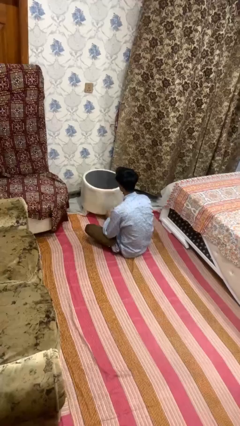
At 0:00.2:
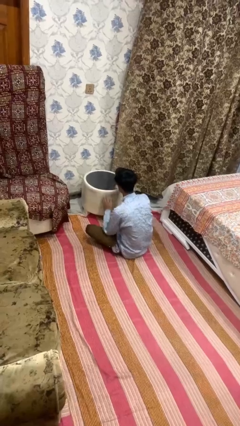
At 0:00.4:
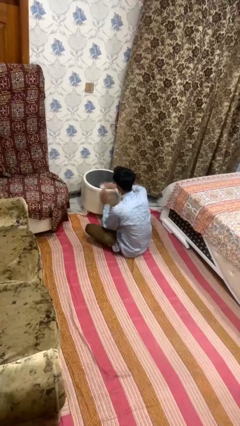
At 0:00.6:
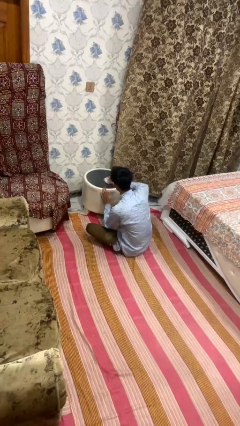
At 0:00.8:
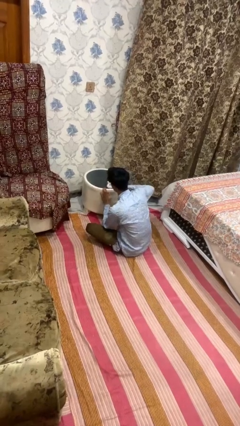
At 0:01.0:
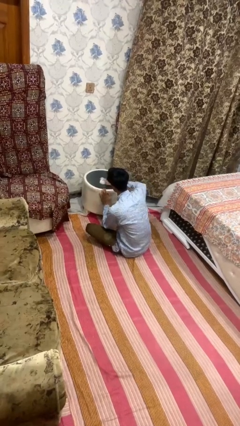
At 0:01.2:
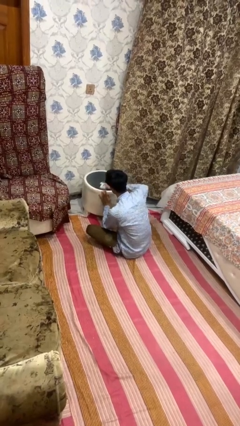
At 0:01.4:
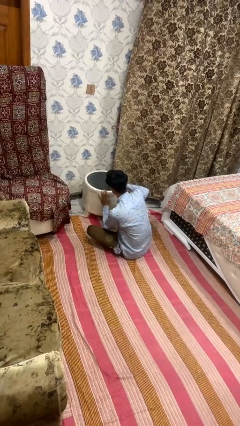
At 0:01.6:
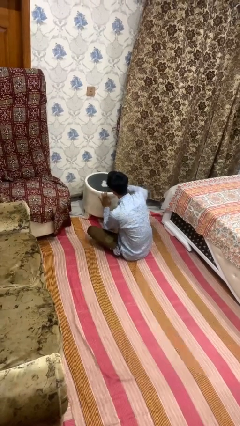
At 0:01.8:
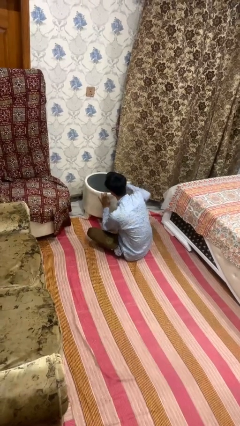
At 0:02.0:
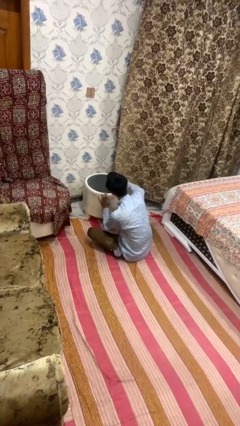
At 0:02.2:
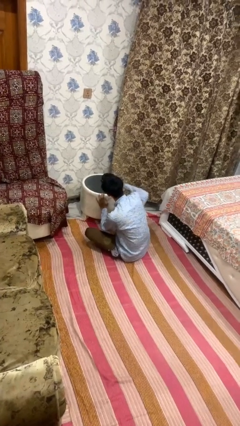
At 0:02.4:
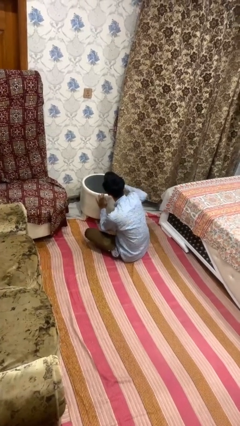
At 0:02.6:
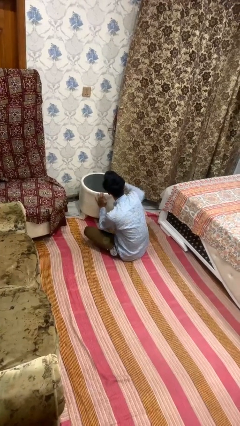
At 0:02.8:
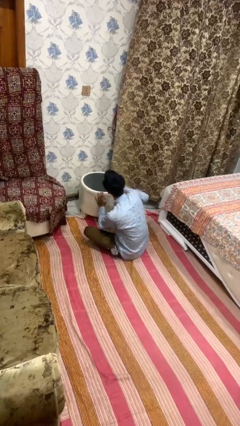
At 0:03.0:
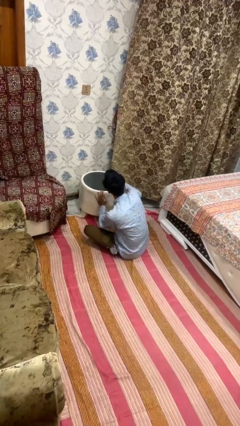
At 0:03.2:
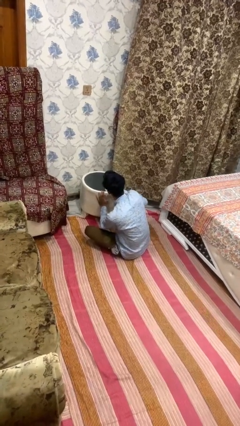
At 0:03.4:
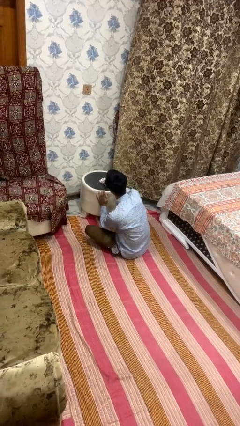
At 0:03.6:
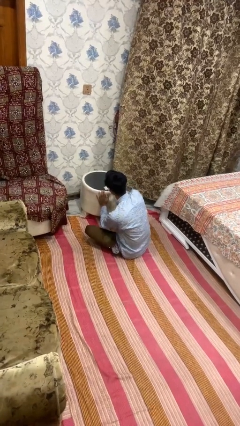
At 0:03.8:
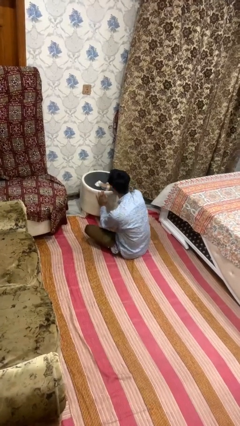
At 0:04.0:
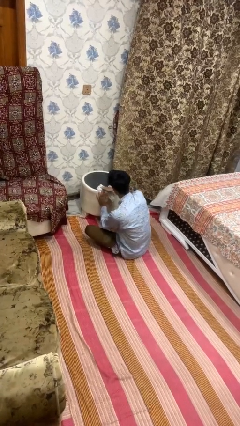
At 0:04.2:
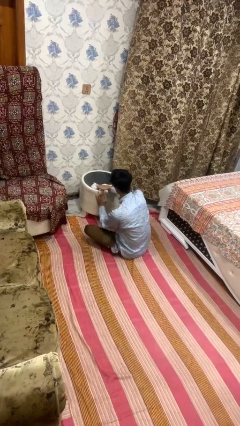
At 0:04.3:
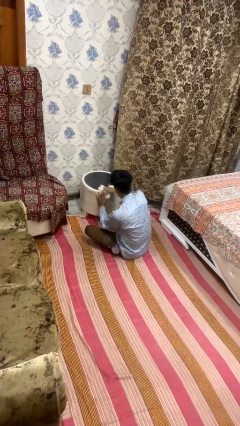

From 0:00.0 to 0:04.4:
person cleans table with rag

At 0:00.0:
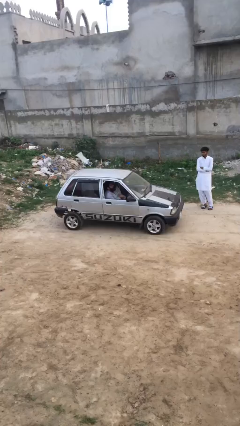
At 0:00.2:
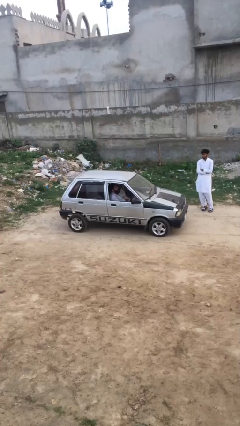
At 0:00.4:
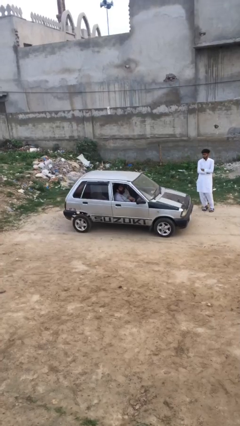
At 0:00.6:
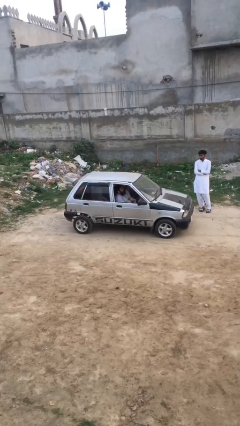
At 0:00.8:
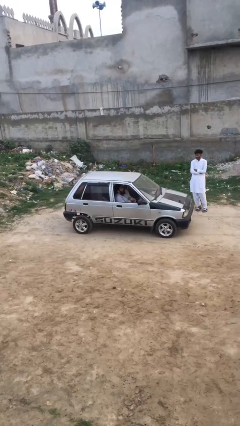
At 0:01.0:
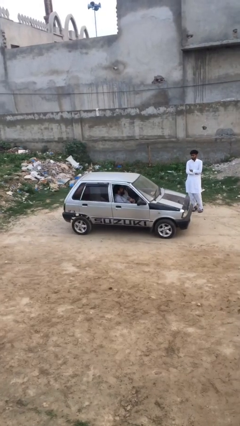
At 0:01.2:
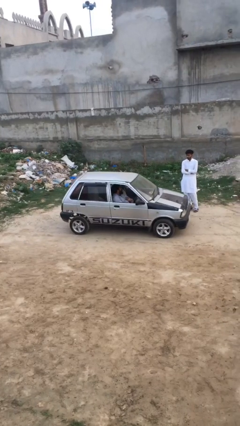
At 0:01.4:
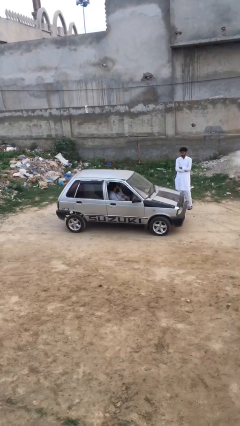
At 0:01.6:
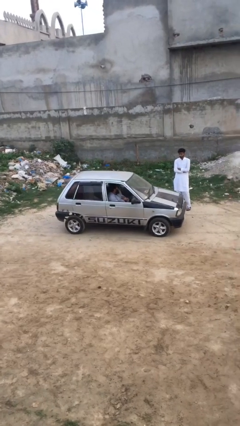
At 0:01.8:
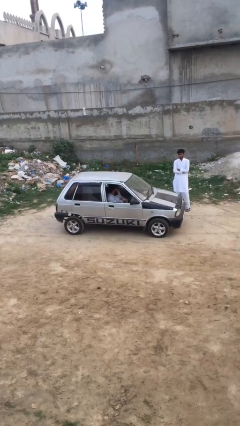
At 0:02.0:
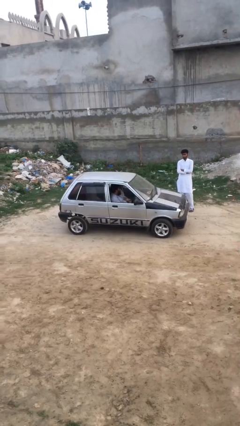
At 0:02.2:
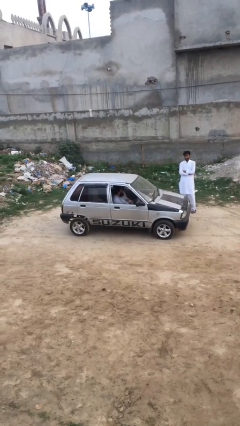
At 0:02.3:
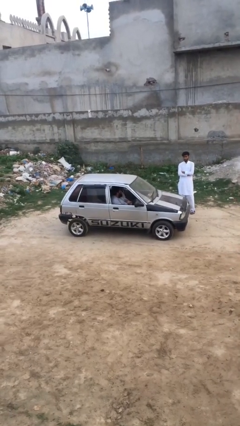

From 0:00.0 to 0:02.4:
car picks up person

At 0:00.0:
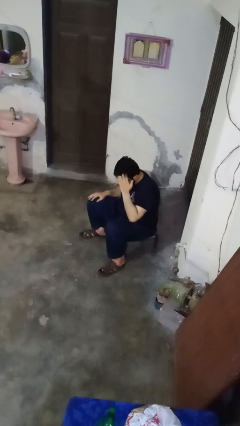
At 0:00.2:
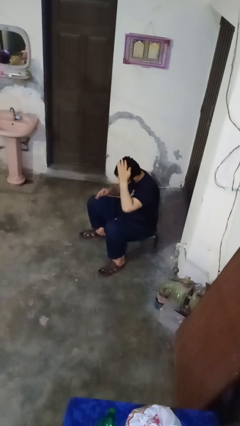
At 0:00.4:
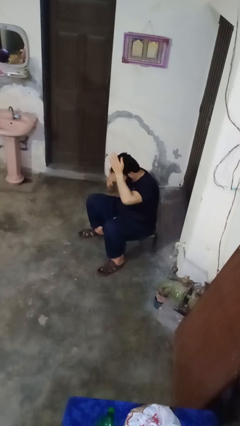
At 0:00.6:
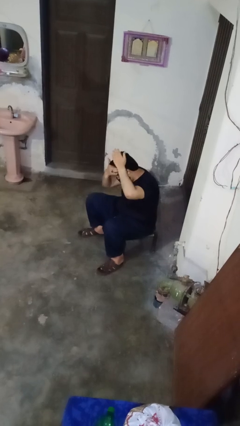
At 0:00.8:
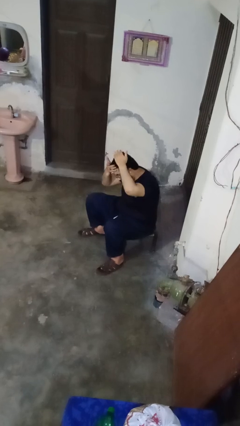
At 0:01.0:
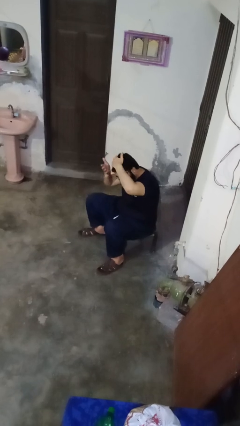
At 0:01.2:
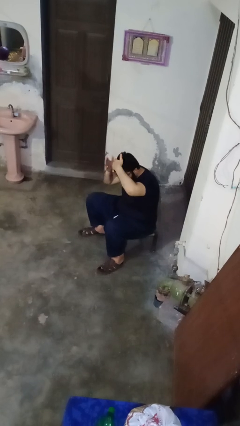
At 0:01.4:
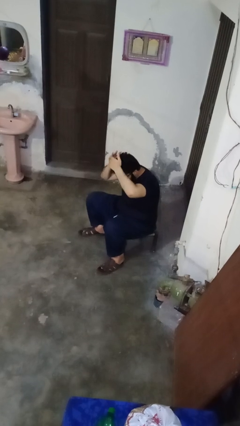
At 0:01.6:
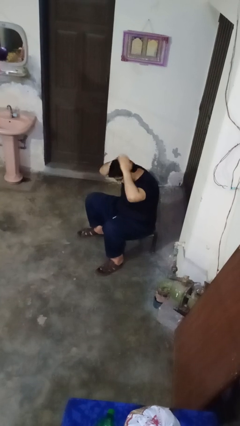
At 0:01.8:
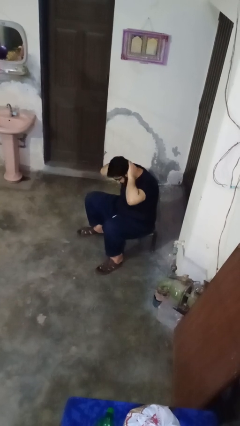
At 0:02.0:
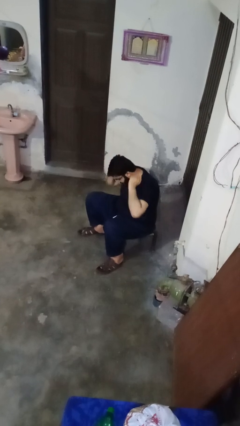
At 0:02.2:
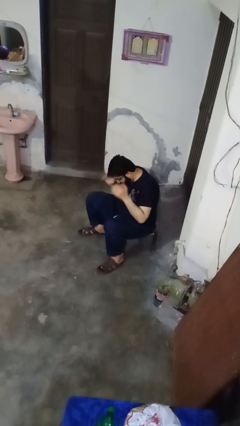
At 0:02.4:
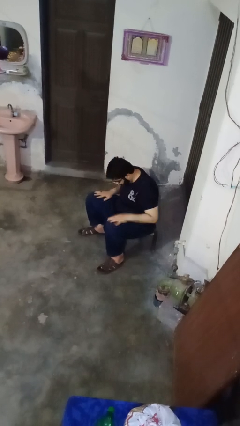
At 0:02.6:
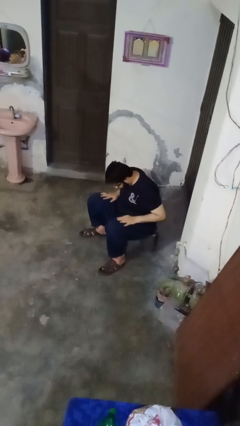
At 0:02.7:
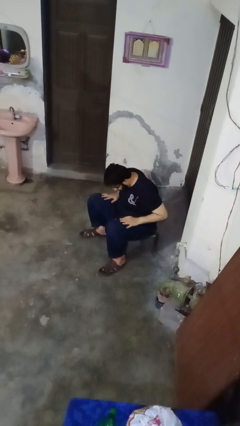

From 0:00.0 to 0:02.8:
person strokes hair

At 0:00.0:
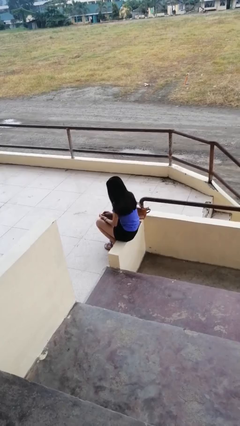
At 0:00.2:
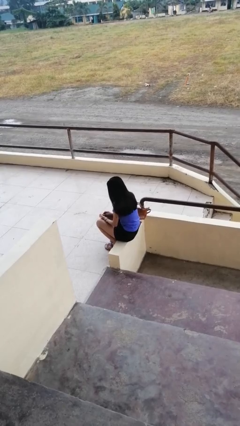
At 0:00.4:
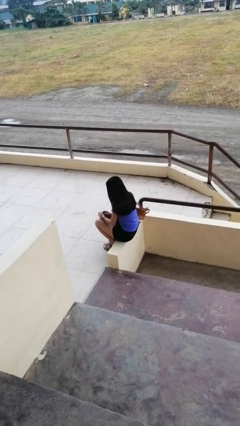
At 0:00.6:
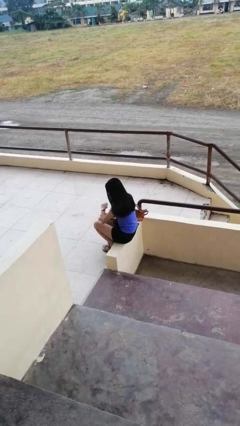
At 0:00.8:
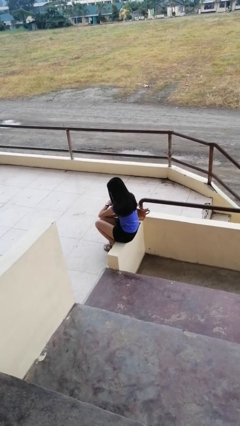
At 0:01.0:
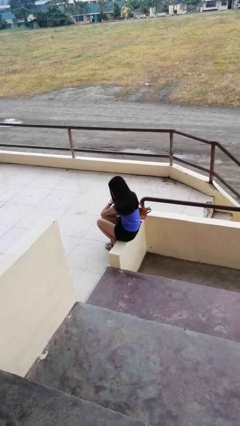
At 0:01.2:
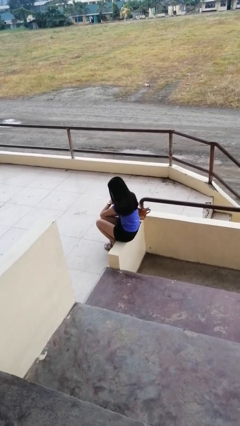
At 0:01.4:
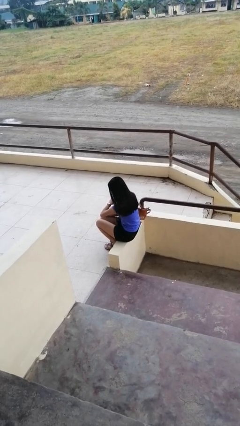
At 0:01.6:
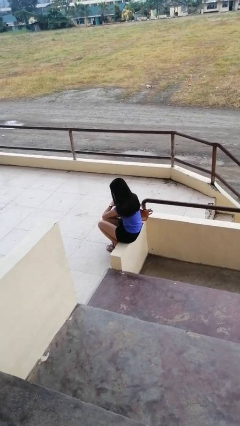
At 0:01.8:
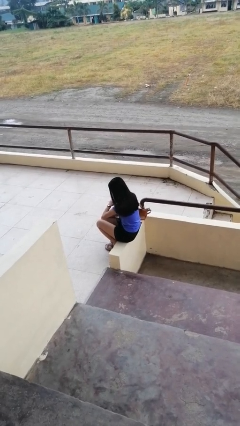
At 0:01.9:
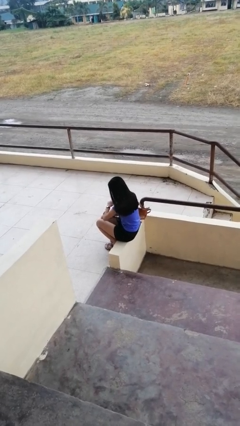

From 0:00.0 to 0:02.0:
person looks at wristwatch

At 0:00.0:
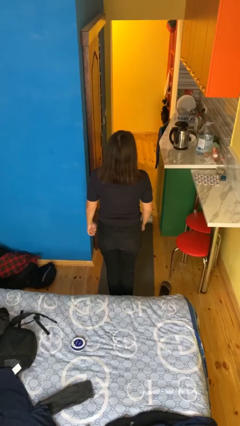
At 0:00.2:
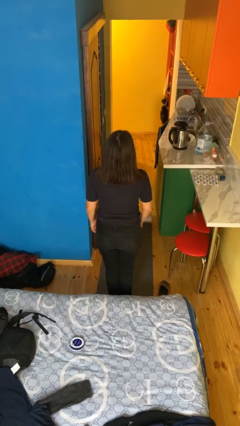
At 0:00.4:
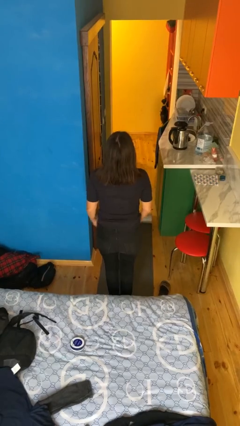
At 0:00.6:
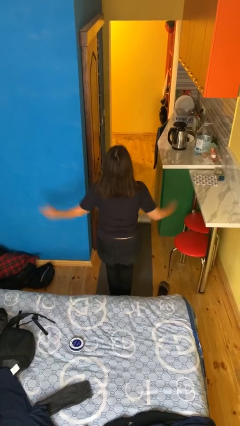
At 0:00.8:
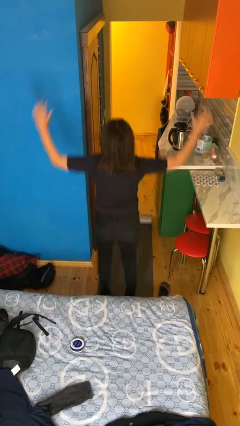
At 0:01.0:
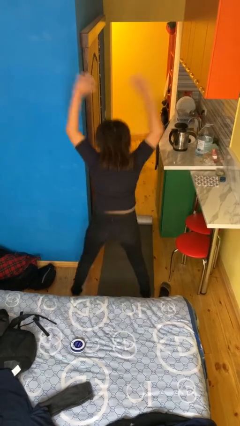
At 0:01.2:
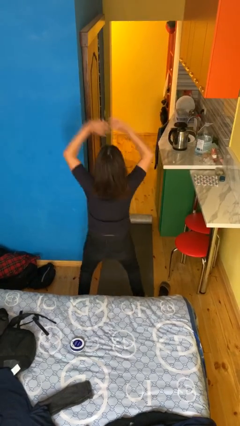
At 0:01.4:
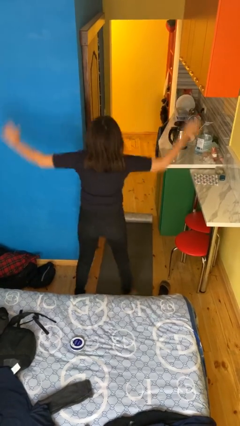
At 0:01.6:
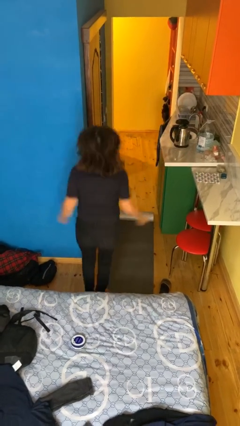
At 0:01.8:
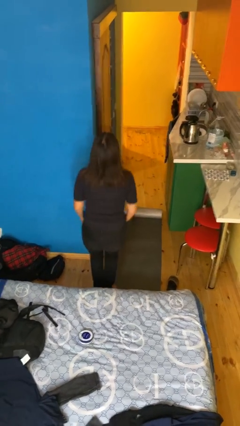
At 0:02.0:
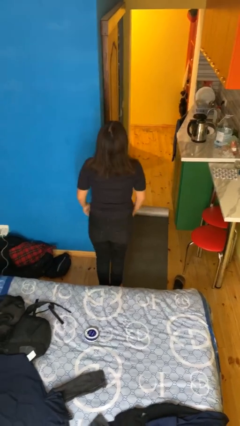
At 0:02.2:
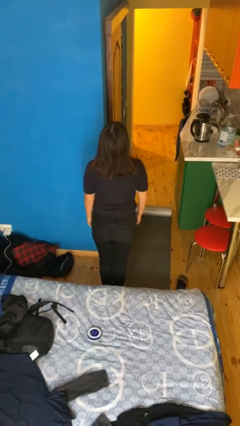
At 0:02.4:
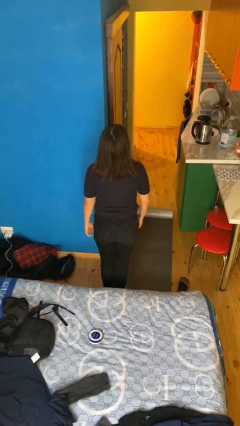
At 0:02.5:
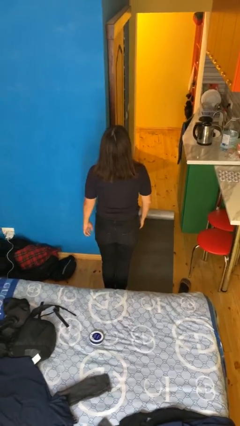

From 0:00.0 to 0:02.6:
person exercises with jumping jacks

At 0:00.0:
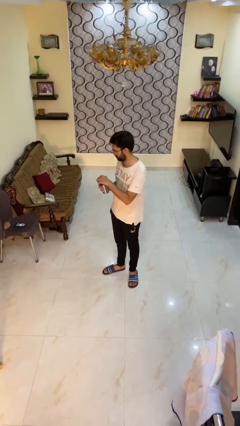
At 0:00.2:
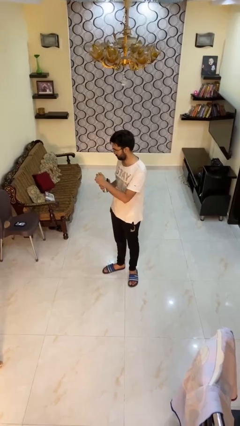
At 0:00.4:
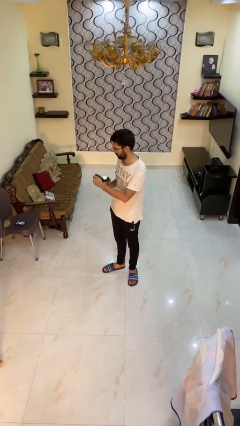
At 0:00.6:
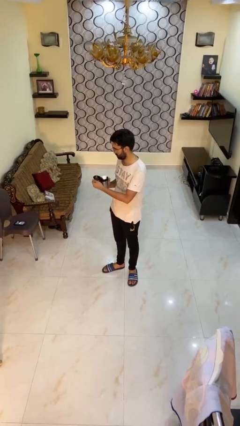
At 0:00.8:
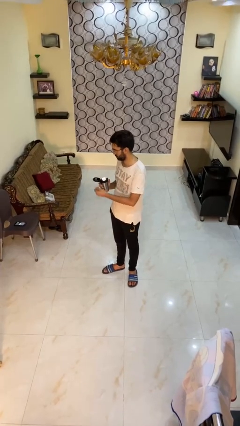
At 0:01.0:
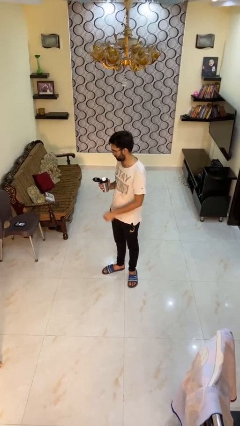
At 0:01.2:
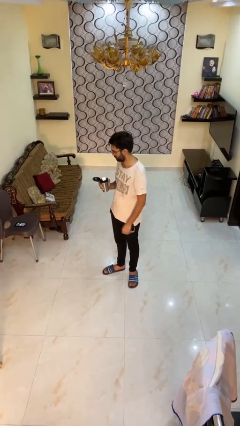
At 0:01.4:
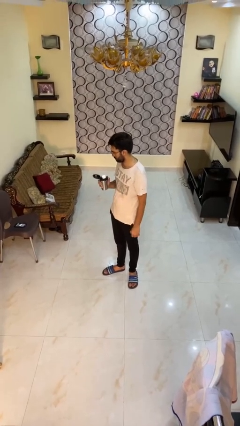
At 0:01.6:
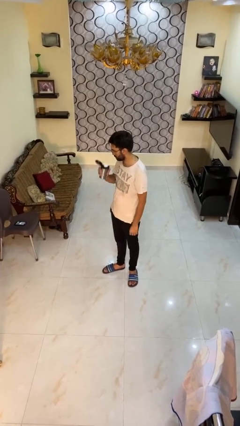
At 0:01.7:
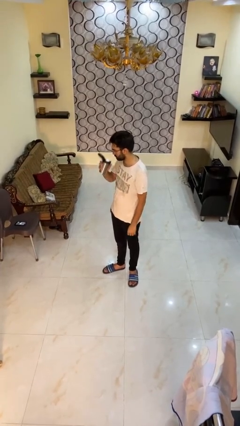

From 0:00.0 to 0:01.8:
person opens beverage can

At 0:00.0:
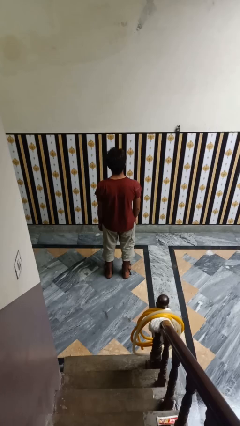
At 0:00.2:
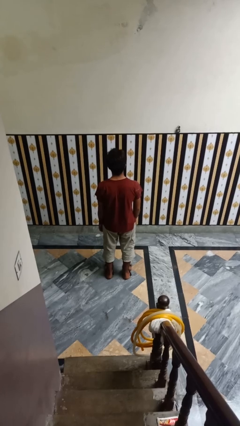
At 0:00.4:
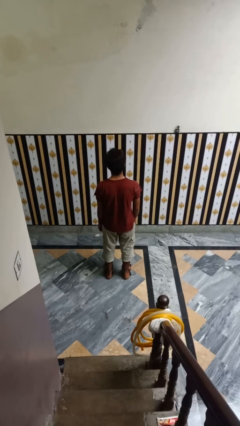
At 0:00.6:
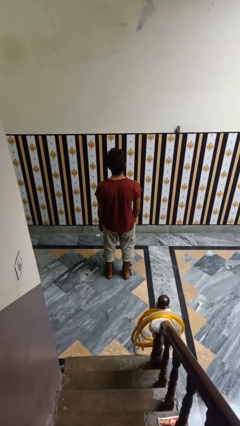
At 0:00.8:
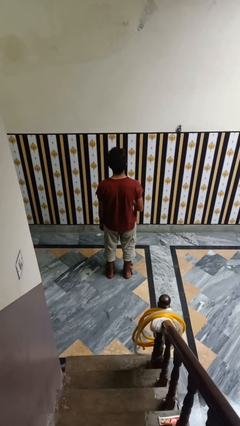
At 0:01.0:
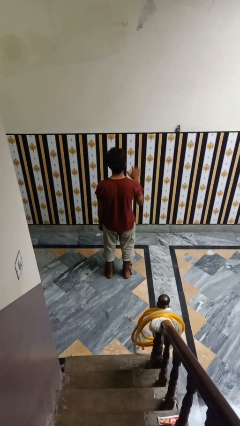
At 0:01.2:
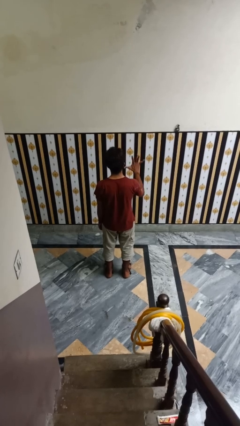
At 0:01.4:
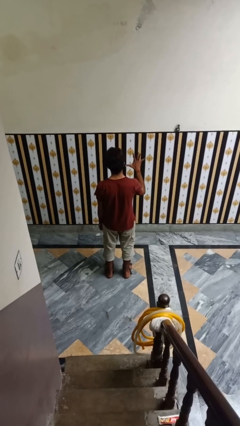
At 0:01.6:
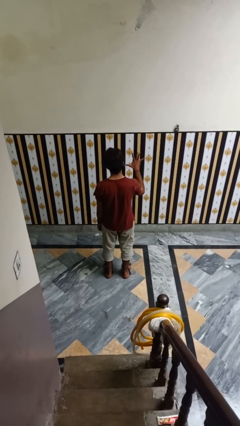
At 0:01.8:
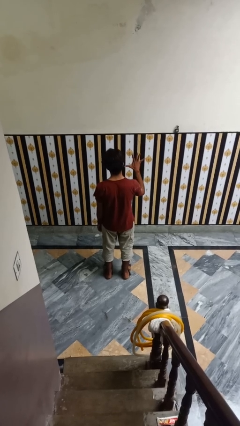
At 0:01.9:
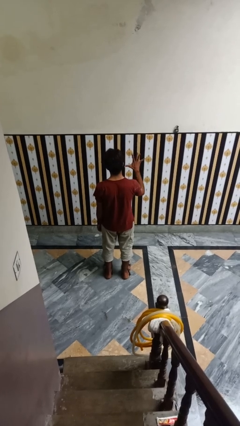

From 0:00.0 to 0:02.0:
person gestures number five
